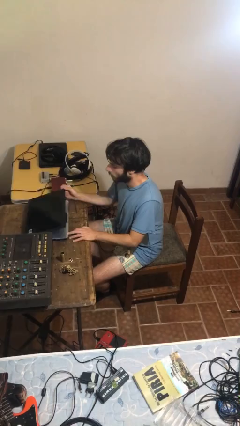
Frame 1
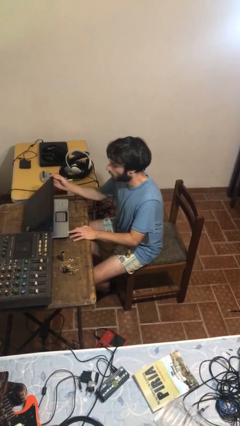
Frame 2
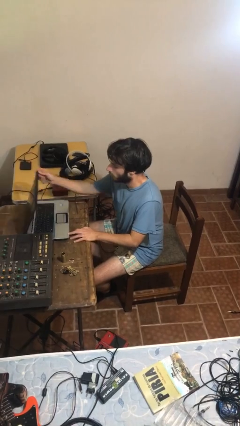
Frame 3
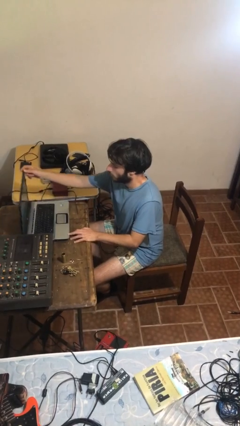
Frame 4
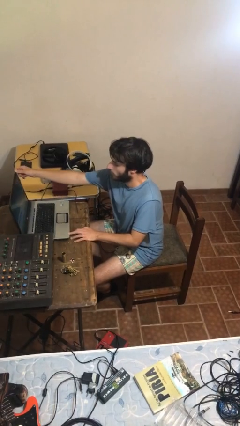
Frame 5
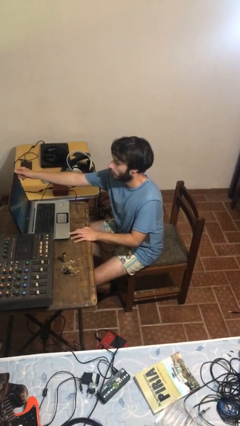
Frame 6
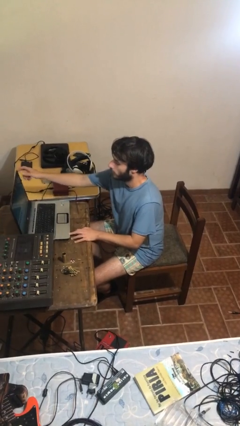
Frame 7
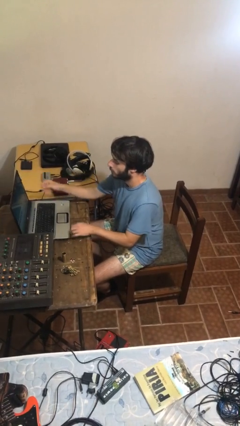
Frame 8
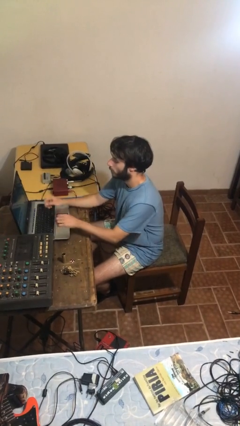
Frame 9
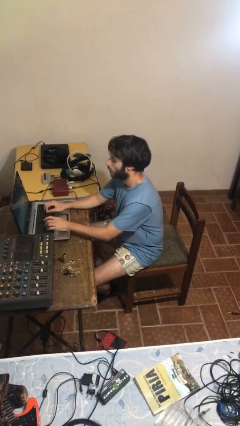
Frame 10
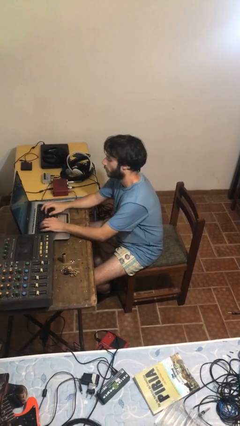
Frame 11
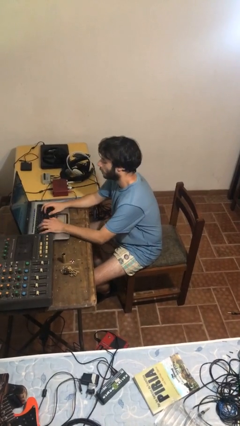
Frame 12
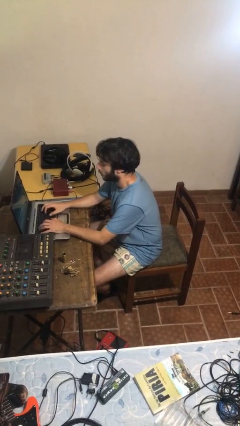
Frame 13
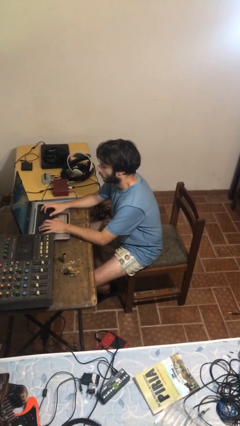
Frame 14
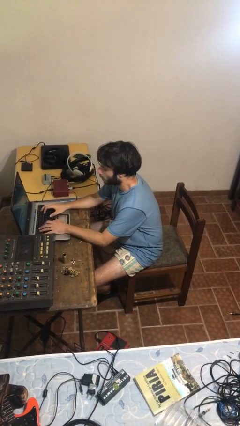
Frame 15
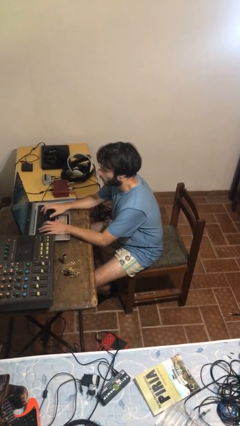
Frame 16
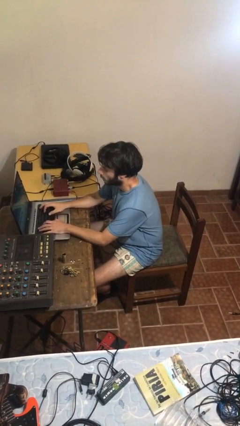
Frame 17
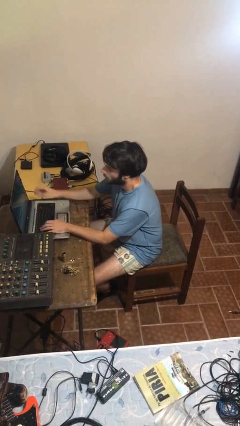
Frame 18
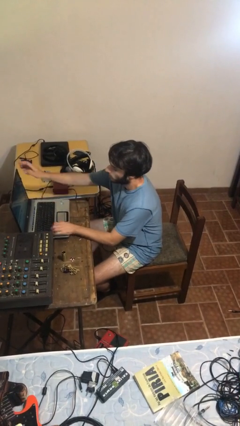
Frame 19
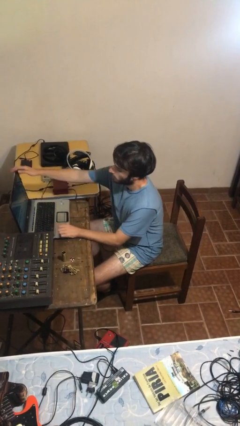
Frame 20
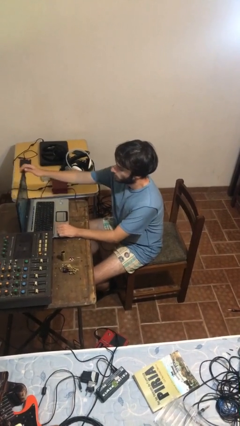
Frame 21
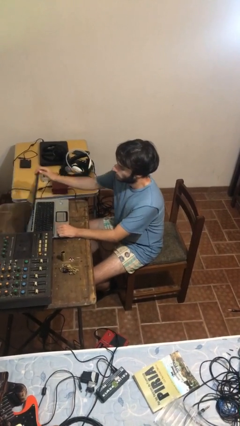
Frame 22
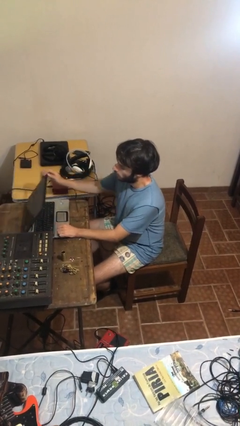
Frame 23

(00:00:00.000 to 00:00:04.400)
person interacts with laptop

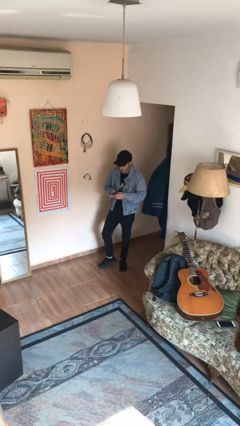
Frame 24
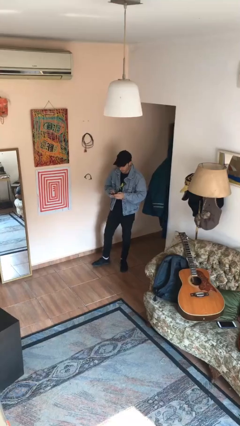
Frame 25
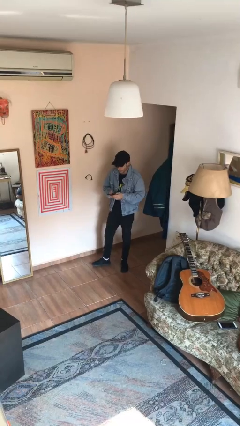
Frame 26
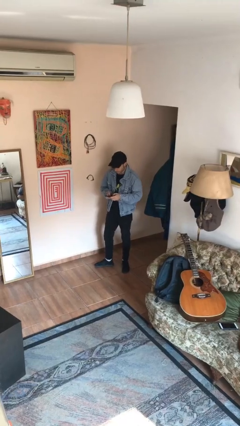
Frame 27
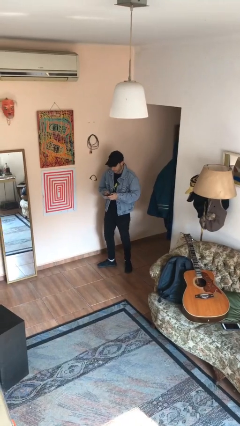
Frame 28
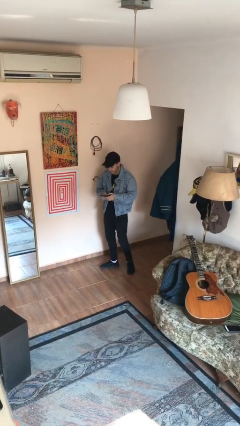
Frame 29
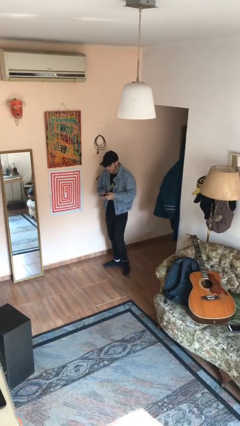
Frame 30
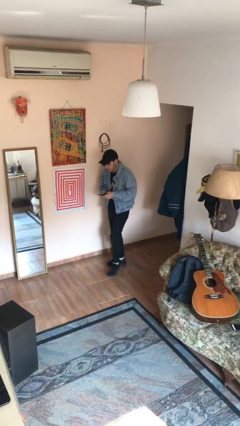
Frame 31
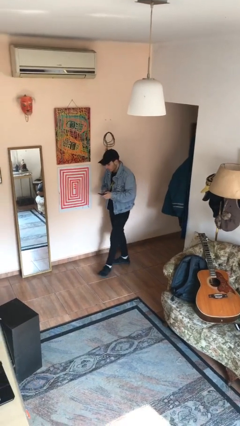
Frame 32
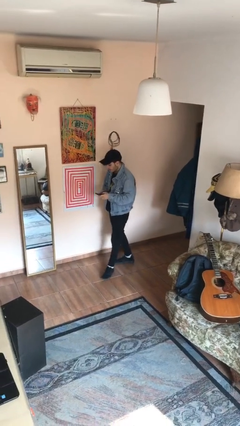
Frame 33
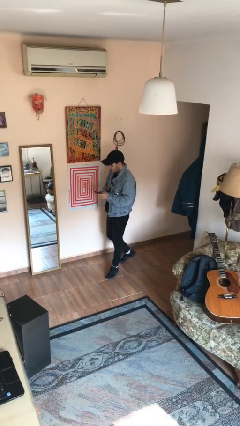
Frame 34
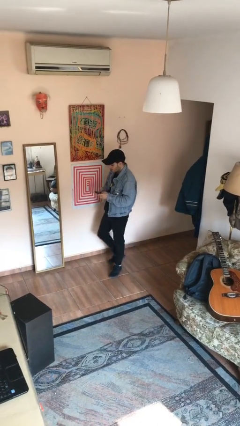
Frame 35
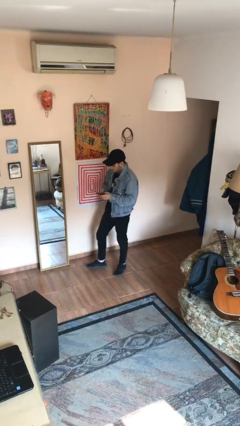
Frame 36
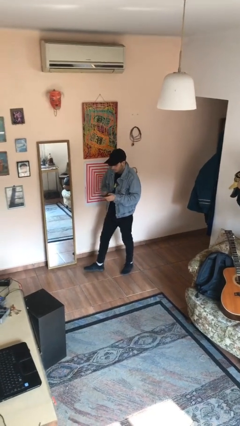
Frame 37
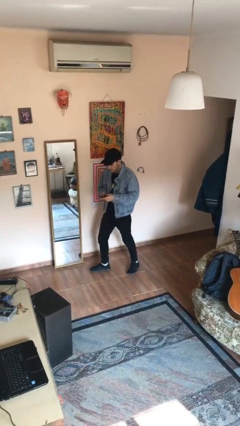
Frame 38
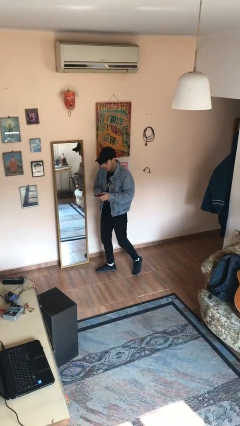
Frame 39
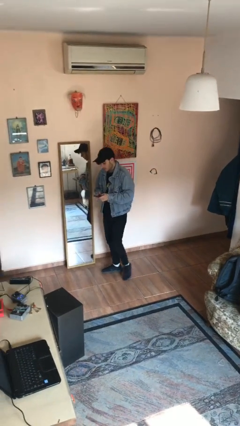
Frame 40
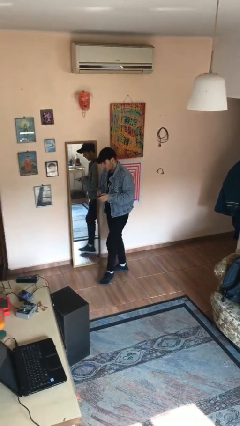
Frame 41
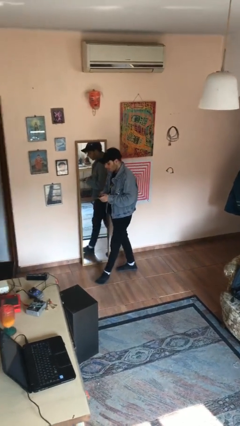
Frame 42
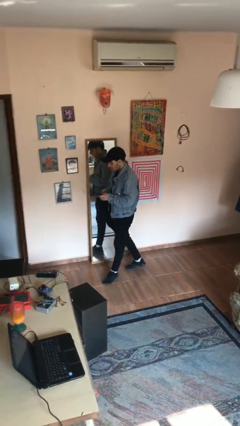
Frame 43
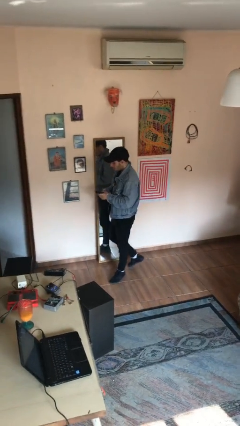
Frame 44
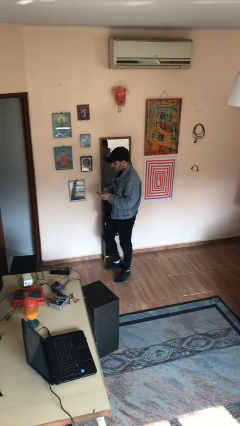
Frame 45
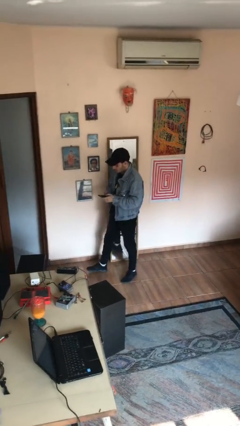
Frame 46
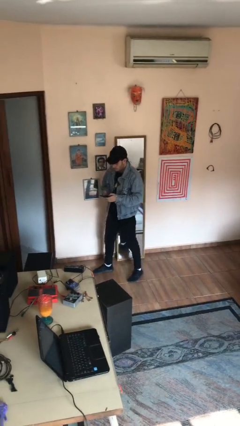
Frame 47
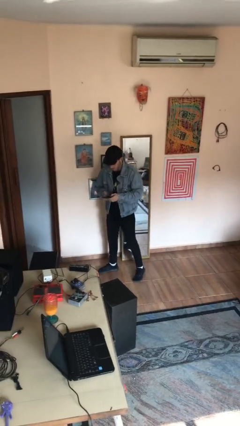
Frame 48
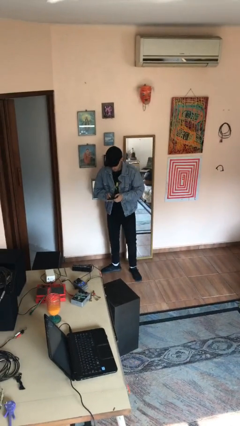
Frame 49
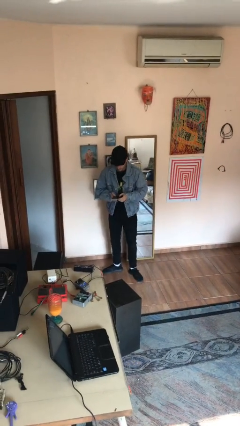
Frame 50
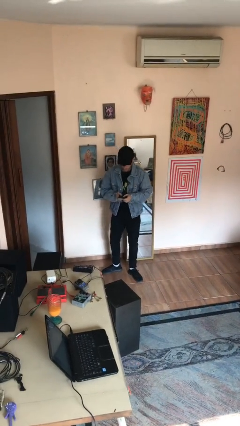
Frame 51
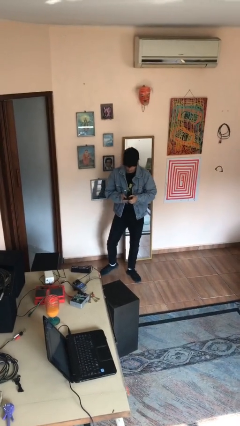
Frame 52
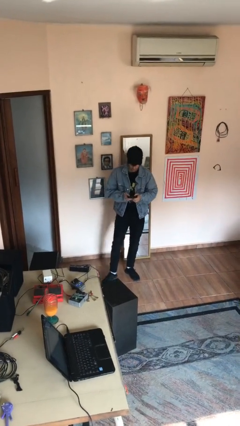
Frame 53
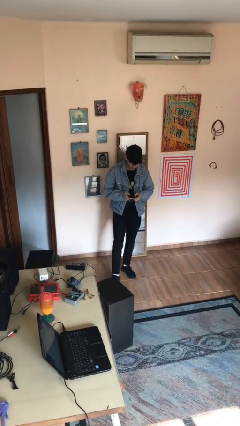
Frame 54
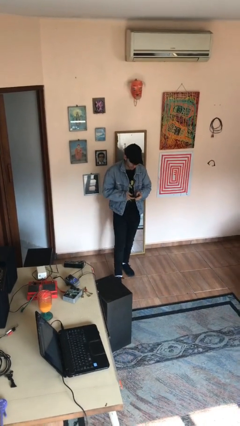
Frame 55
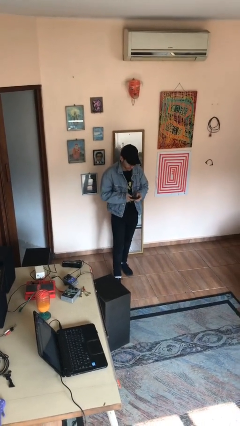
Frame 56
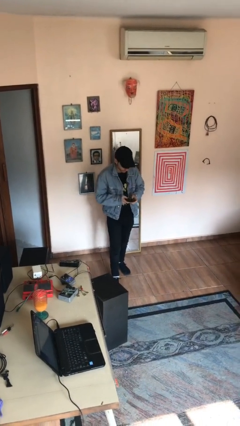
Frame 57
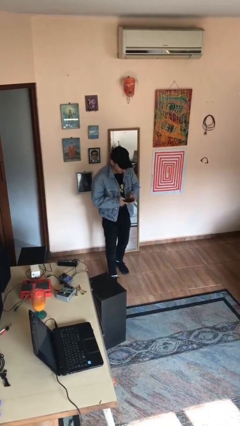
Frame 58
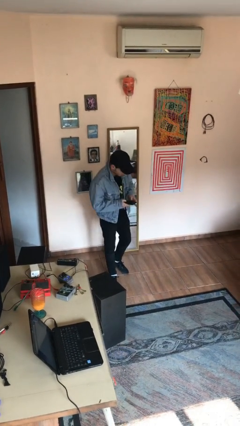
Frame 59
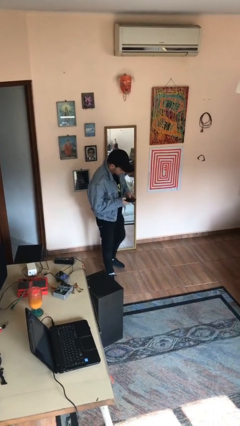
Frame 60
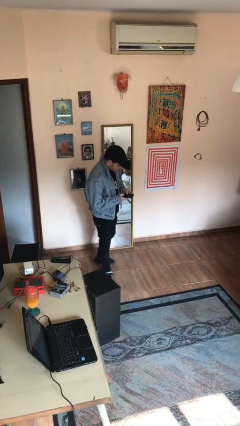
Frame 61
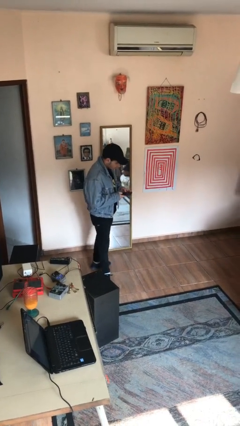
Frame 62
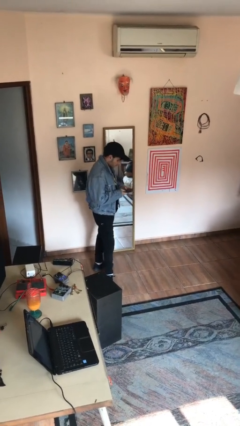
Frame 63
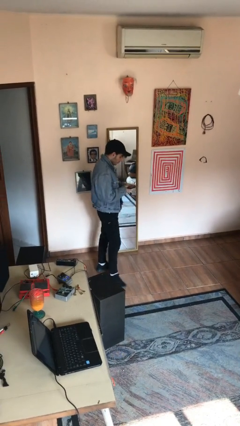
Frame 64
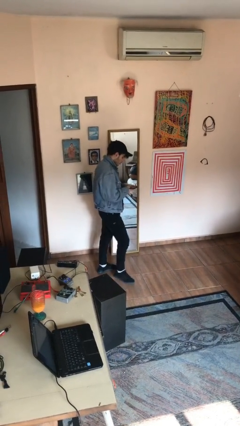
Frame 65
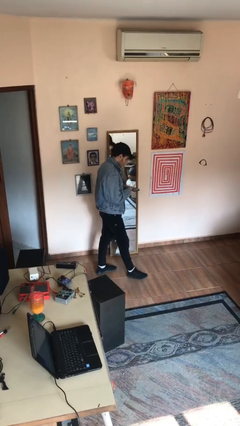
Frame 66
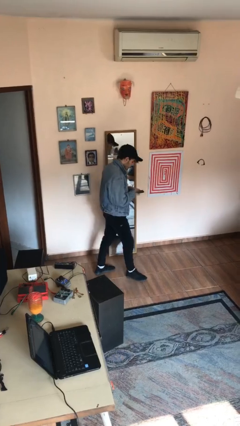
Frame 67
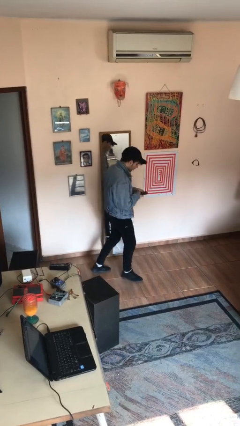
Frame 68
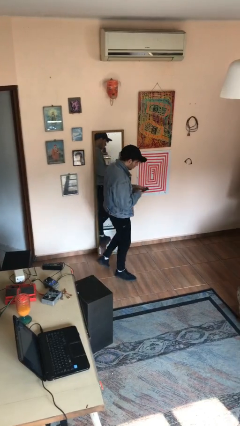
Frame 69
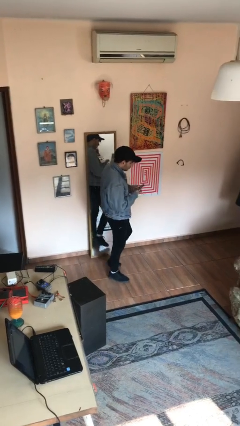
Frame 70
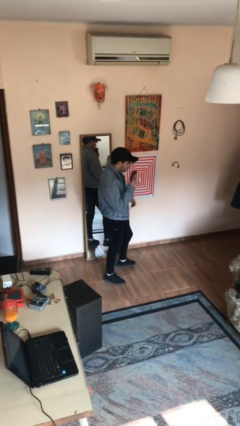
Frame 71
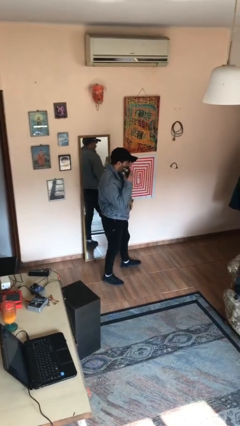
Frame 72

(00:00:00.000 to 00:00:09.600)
person texts on phone

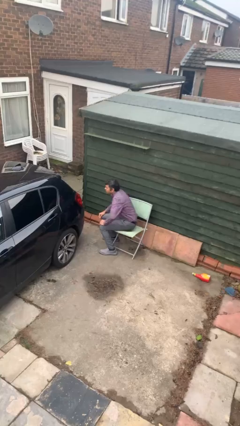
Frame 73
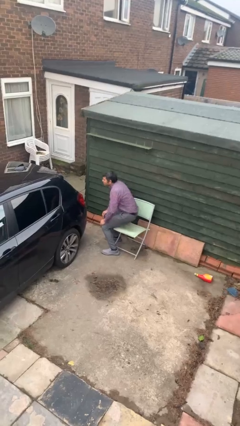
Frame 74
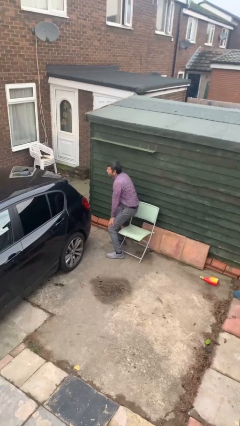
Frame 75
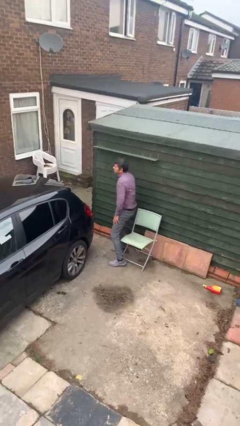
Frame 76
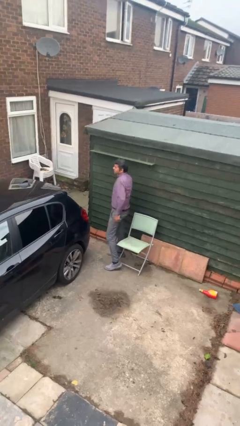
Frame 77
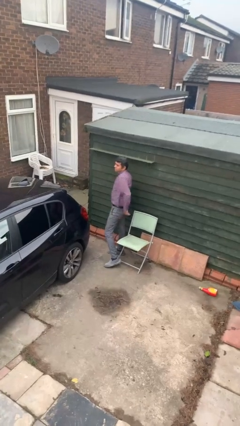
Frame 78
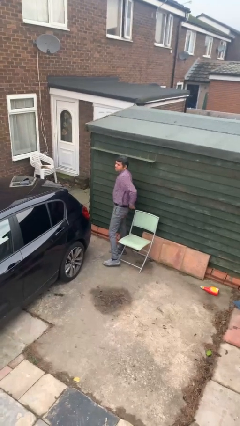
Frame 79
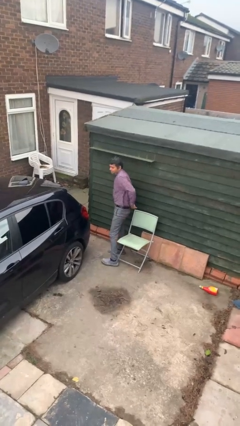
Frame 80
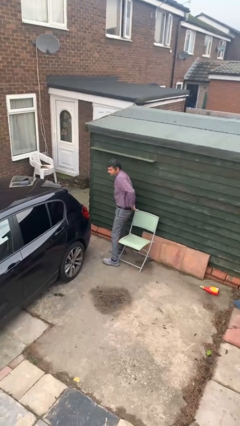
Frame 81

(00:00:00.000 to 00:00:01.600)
person stands up

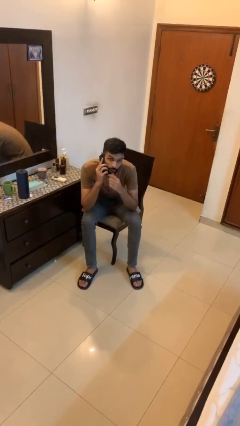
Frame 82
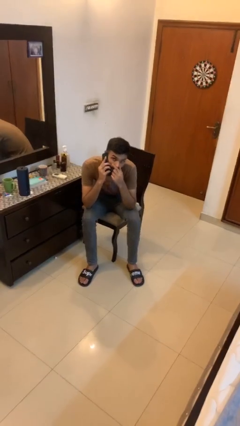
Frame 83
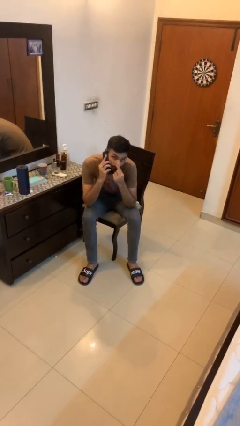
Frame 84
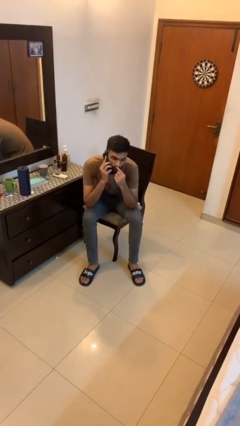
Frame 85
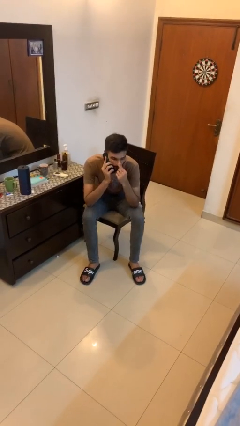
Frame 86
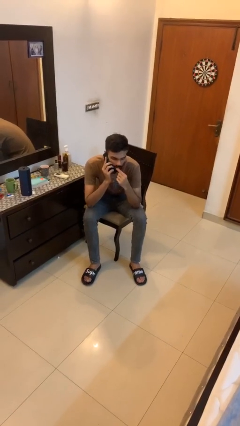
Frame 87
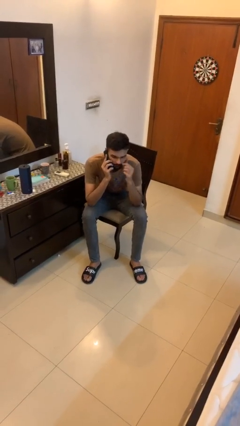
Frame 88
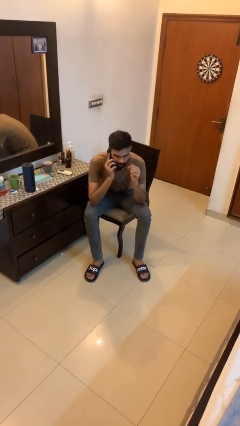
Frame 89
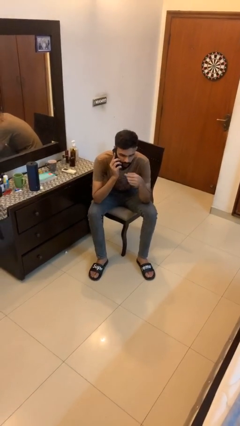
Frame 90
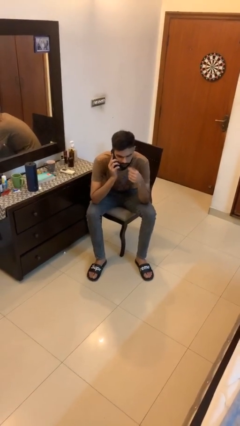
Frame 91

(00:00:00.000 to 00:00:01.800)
person talks on phone
